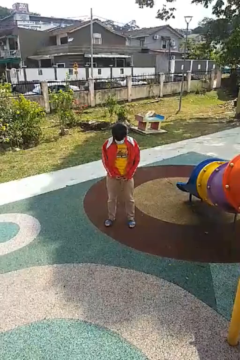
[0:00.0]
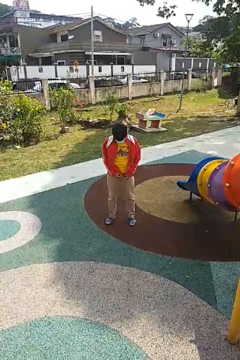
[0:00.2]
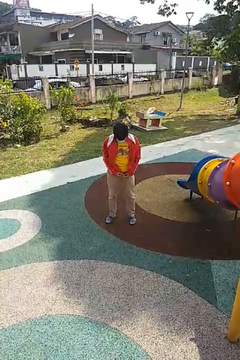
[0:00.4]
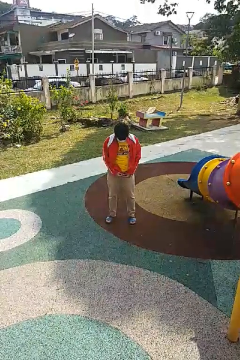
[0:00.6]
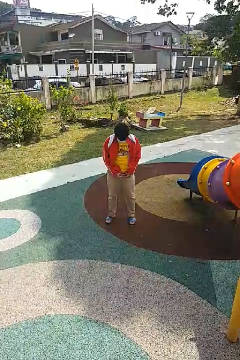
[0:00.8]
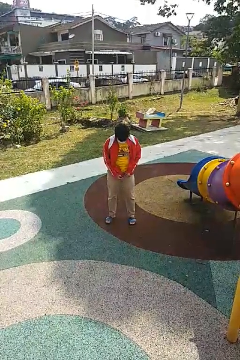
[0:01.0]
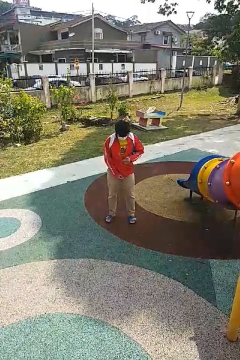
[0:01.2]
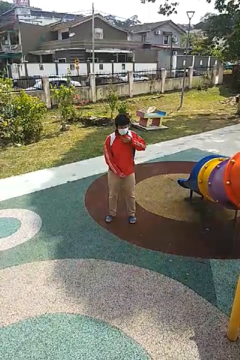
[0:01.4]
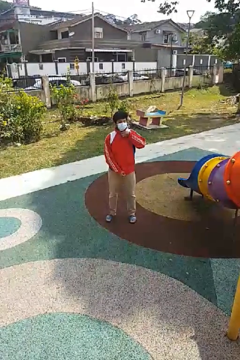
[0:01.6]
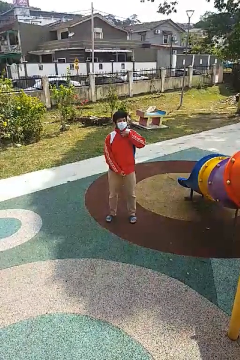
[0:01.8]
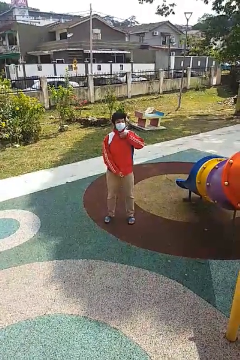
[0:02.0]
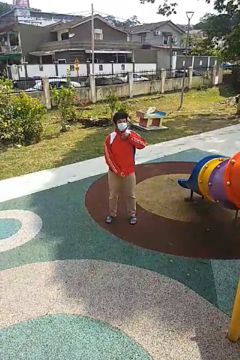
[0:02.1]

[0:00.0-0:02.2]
person zips up jacket

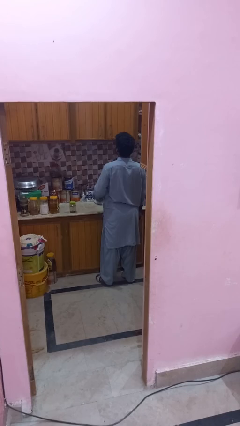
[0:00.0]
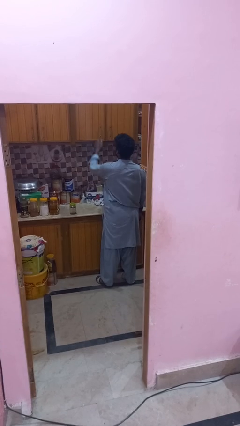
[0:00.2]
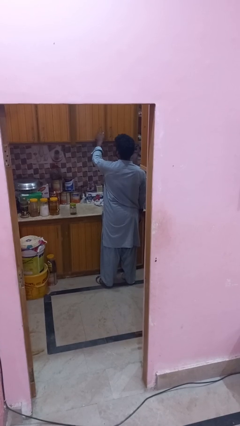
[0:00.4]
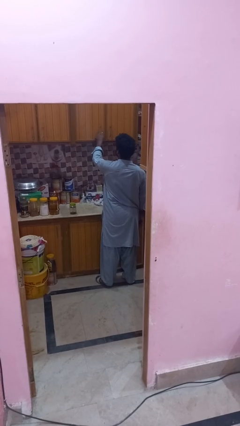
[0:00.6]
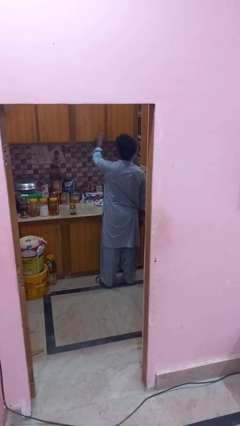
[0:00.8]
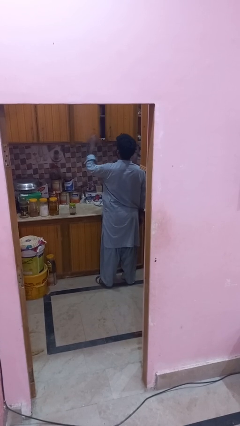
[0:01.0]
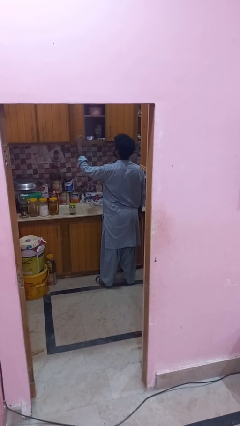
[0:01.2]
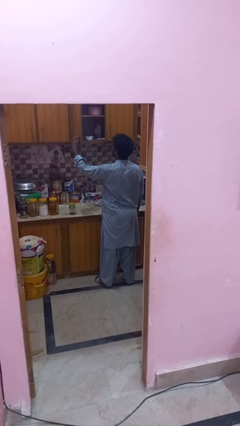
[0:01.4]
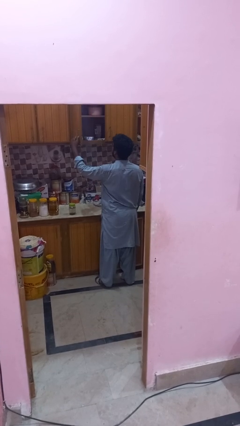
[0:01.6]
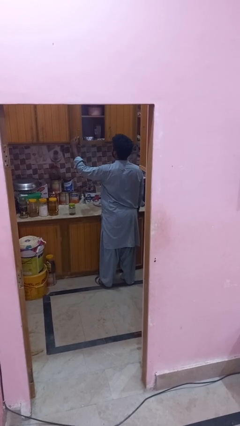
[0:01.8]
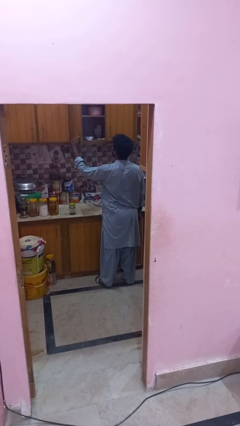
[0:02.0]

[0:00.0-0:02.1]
person opens cabinet

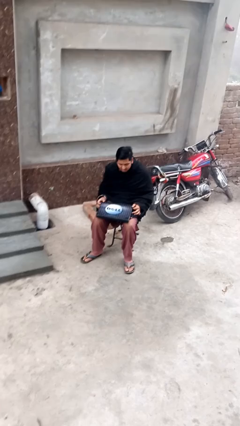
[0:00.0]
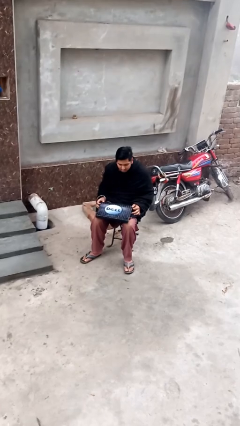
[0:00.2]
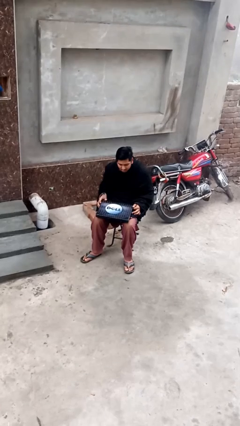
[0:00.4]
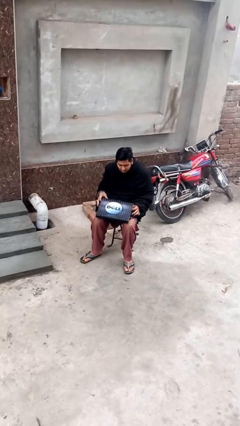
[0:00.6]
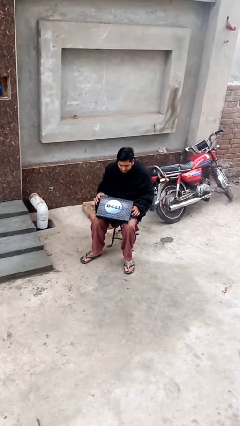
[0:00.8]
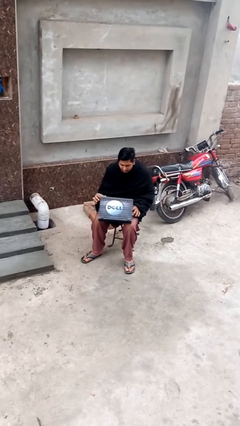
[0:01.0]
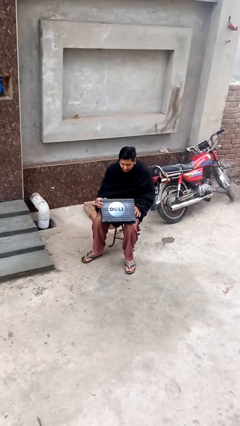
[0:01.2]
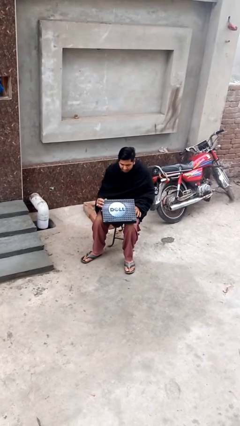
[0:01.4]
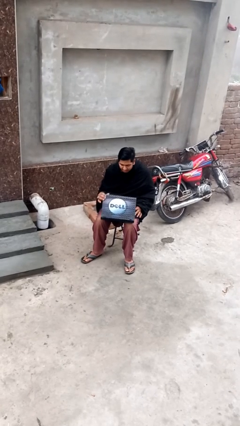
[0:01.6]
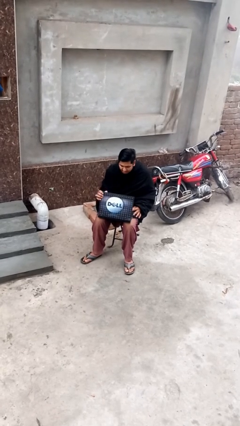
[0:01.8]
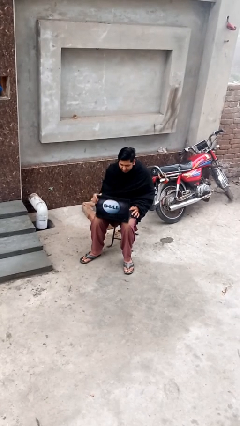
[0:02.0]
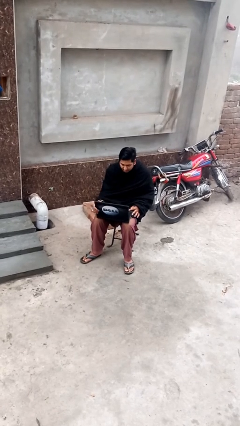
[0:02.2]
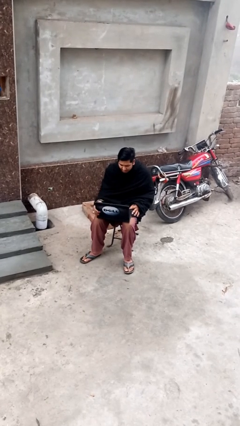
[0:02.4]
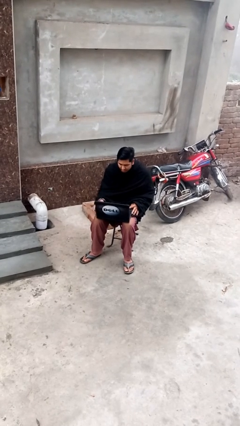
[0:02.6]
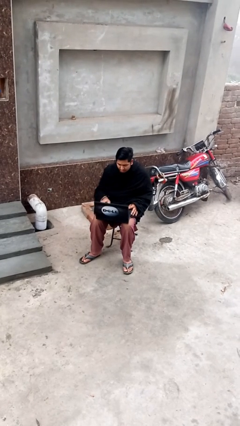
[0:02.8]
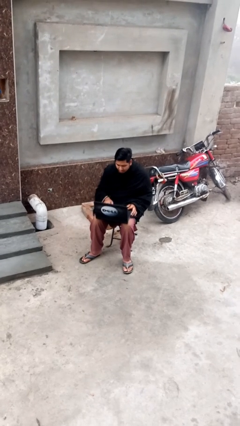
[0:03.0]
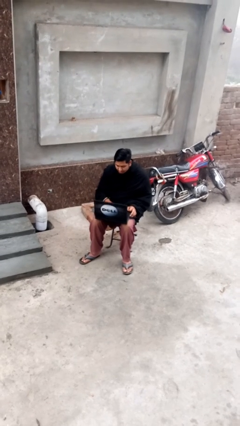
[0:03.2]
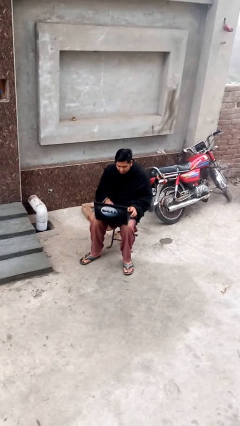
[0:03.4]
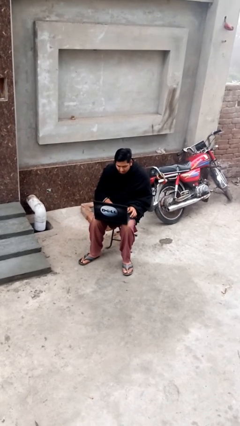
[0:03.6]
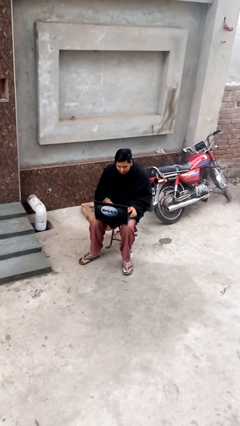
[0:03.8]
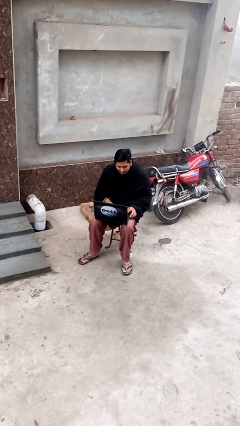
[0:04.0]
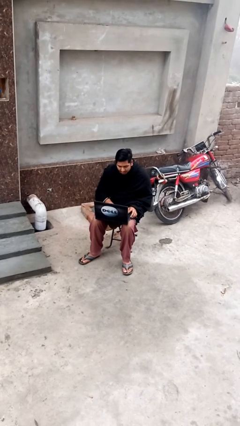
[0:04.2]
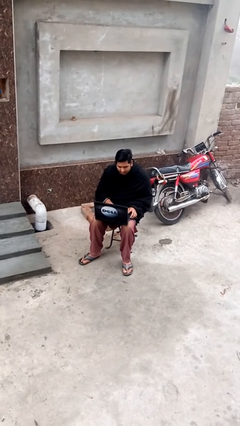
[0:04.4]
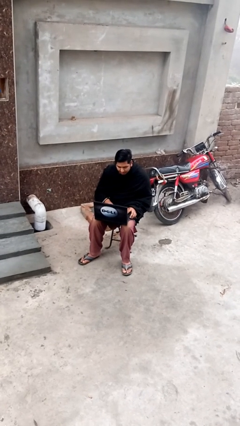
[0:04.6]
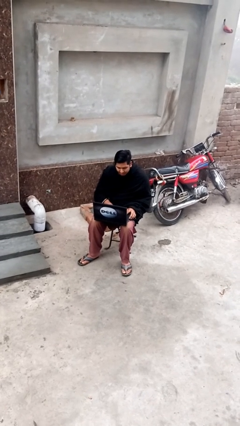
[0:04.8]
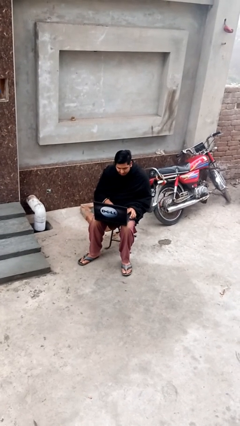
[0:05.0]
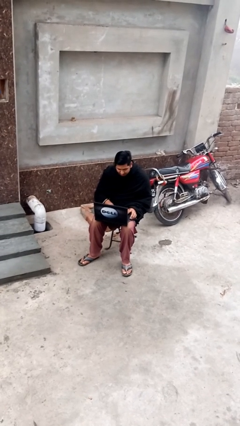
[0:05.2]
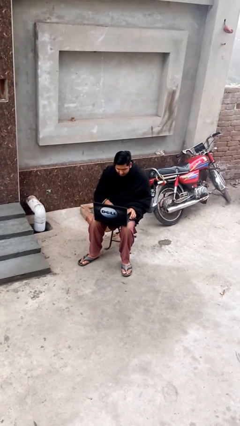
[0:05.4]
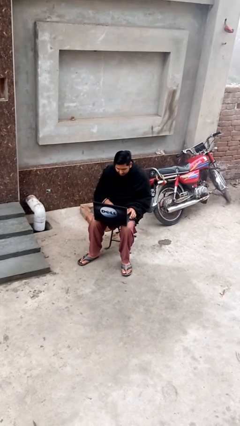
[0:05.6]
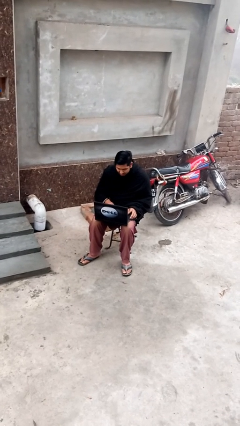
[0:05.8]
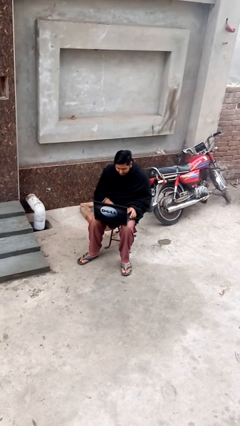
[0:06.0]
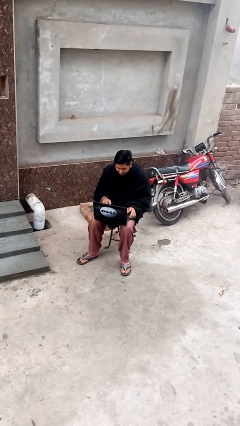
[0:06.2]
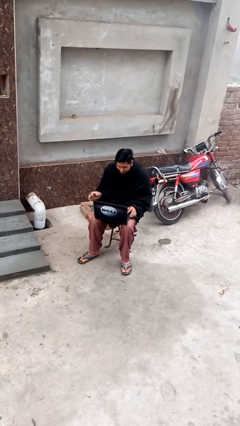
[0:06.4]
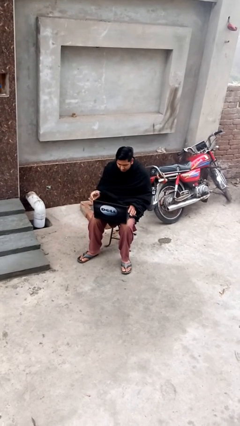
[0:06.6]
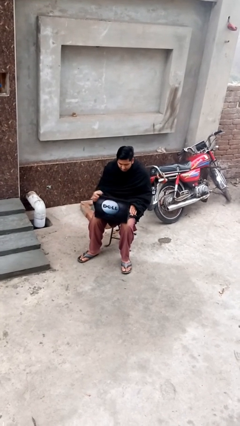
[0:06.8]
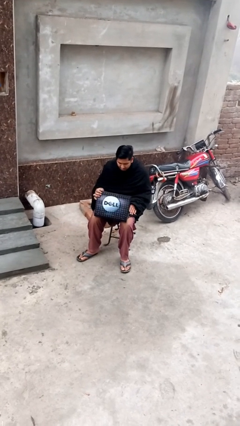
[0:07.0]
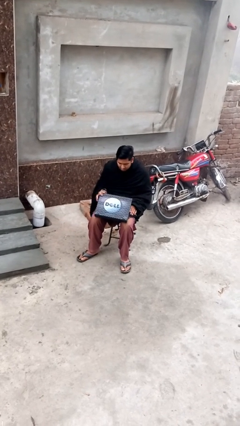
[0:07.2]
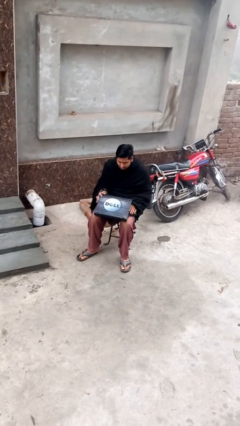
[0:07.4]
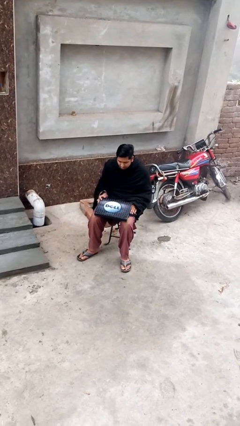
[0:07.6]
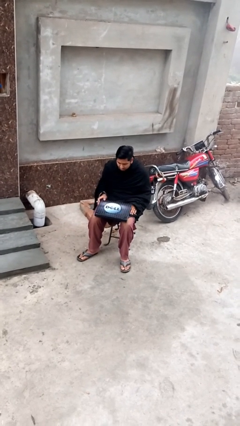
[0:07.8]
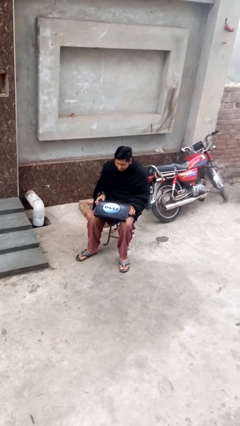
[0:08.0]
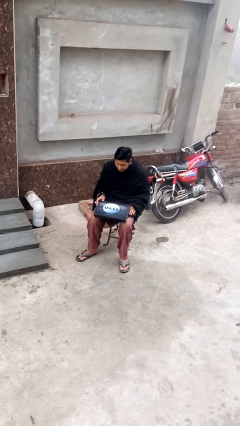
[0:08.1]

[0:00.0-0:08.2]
person interacts with laptop

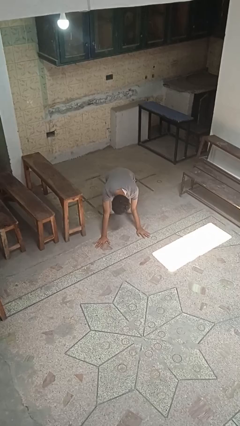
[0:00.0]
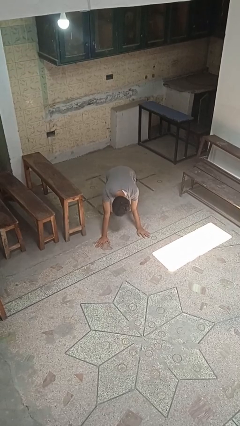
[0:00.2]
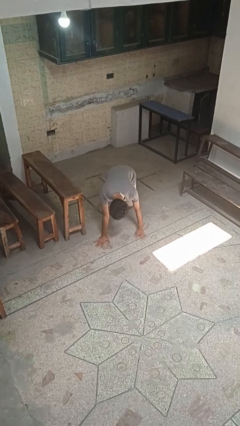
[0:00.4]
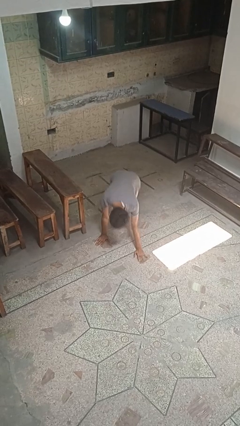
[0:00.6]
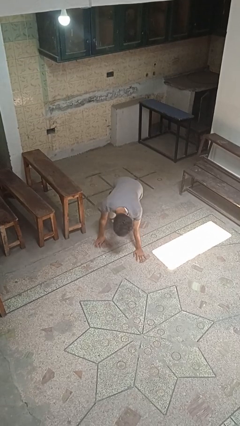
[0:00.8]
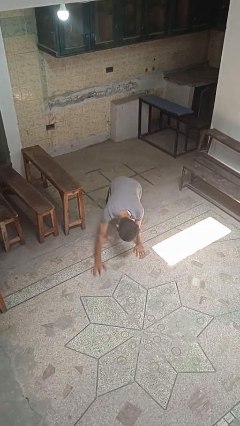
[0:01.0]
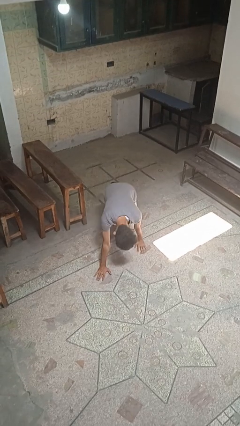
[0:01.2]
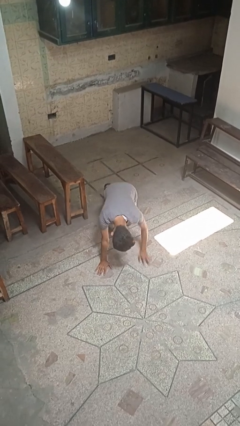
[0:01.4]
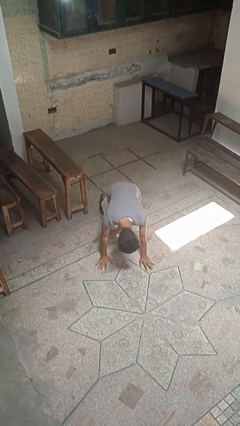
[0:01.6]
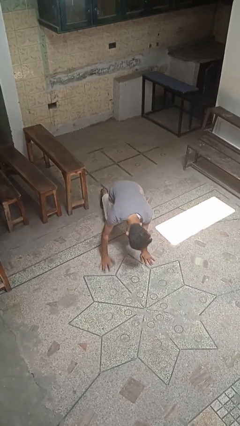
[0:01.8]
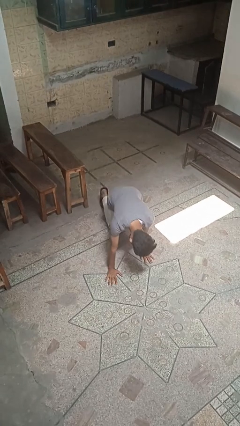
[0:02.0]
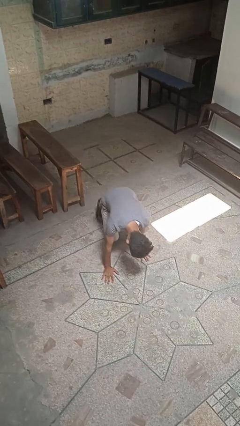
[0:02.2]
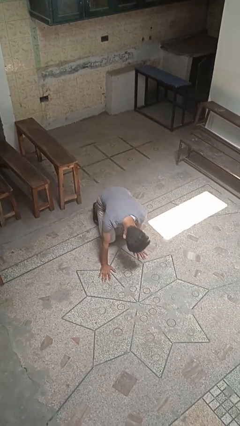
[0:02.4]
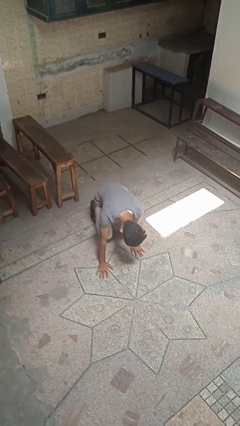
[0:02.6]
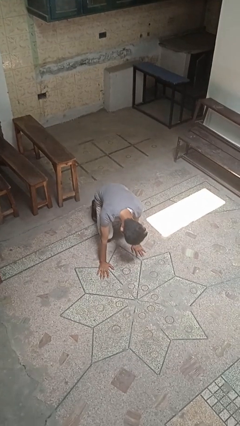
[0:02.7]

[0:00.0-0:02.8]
person crawls

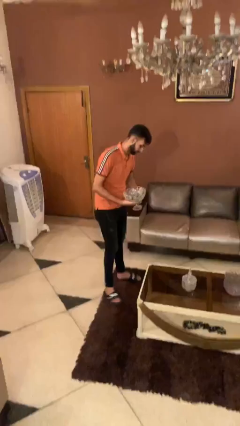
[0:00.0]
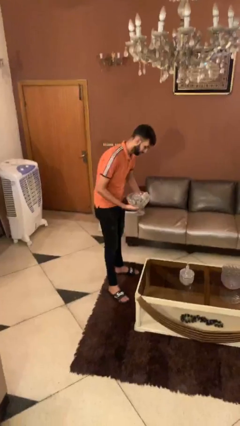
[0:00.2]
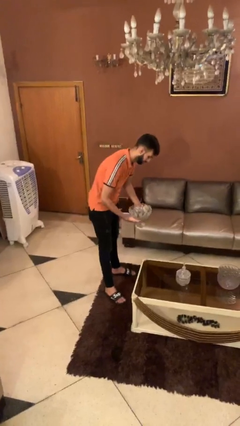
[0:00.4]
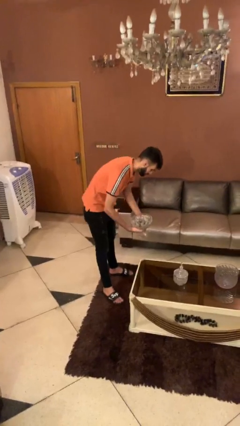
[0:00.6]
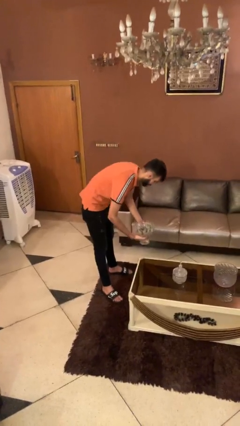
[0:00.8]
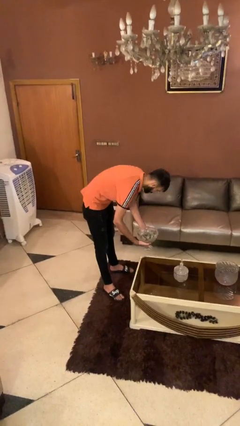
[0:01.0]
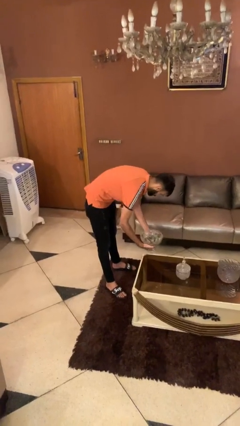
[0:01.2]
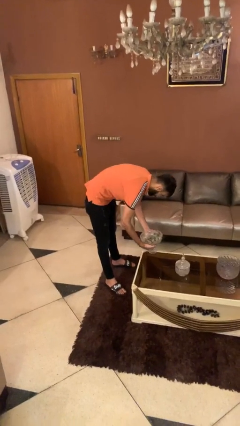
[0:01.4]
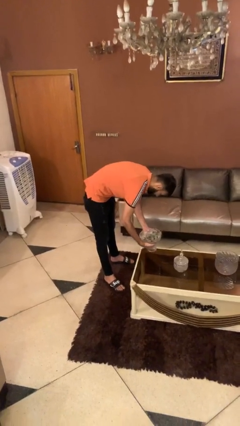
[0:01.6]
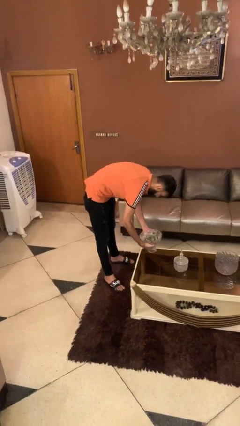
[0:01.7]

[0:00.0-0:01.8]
person puts down object on table

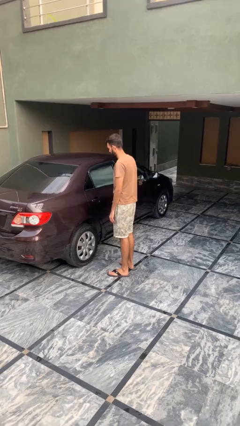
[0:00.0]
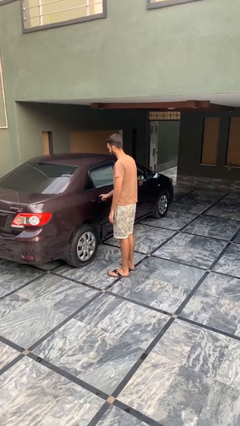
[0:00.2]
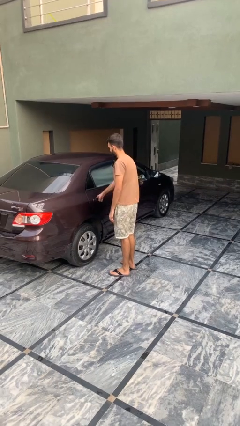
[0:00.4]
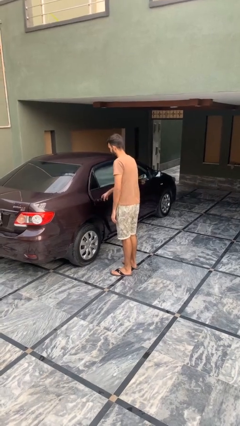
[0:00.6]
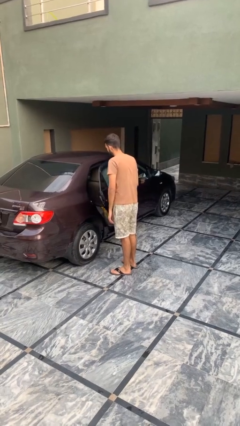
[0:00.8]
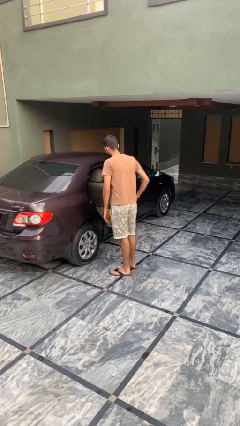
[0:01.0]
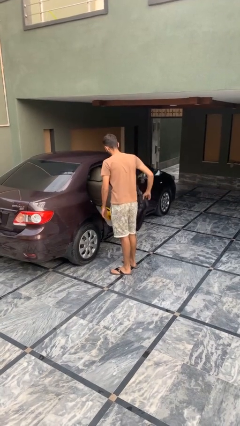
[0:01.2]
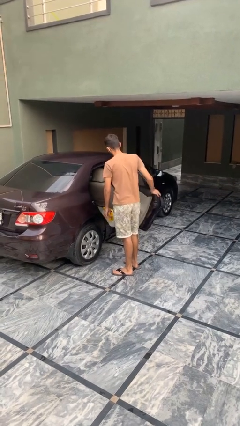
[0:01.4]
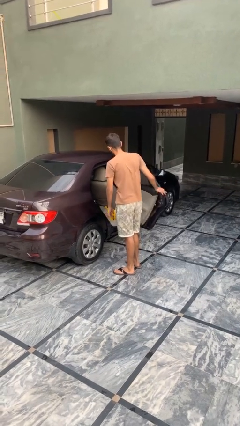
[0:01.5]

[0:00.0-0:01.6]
person opens car door
